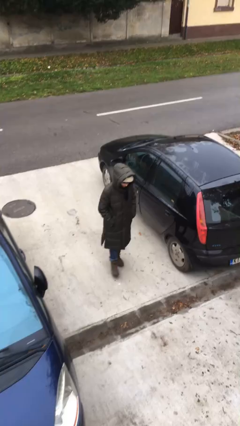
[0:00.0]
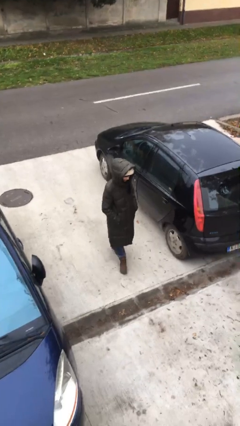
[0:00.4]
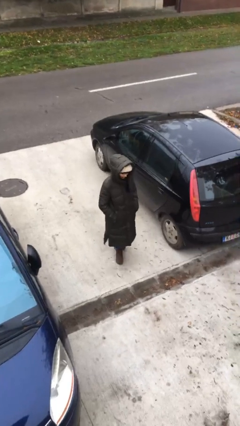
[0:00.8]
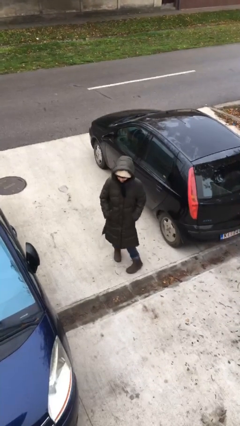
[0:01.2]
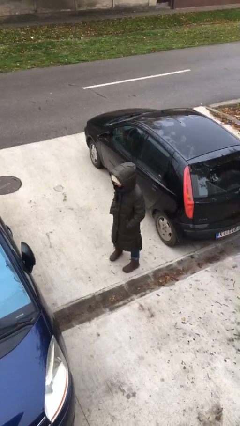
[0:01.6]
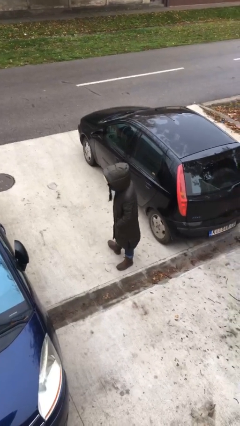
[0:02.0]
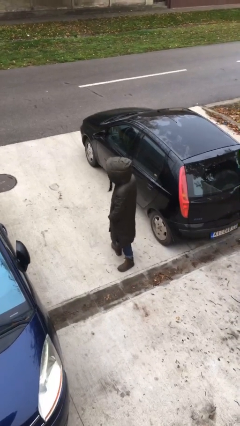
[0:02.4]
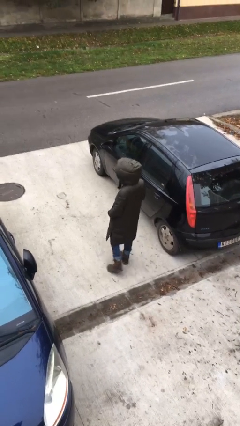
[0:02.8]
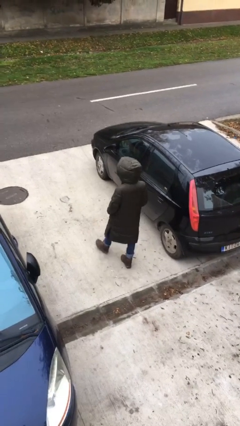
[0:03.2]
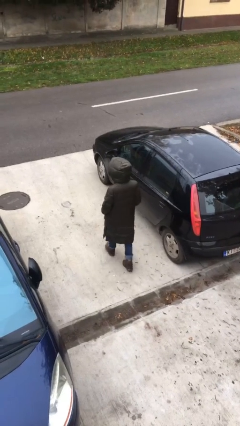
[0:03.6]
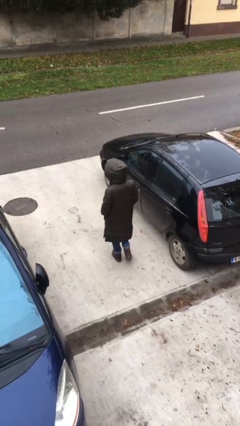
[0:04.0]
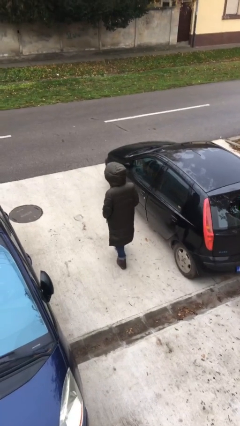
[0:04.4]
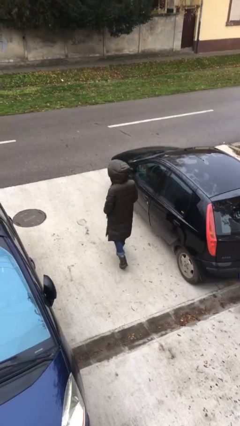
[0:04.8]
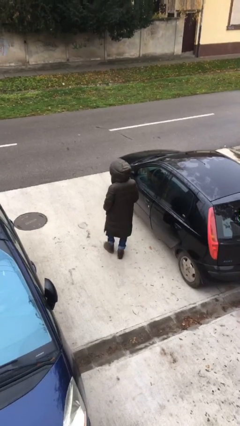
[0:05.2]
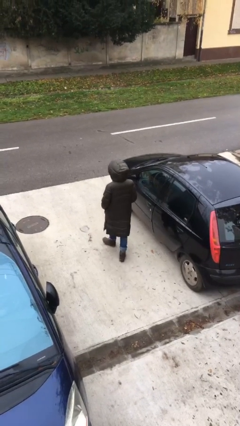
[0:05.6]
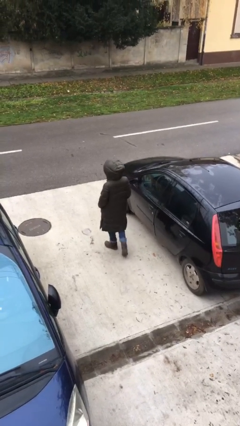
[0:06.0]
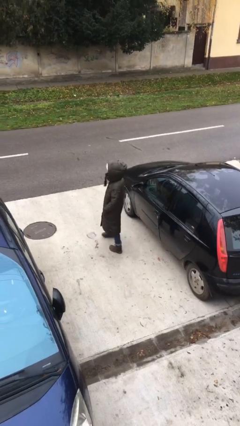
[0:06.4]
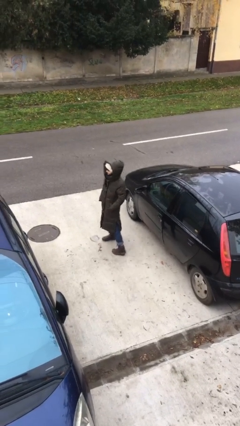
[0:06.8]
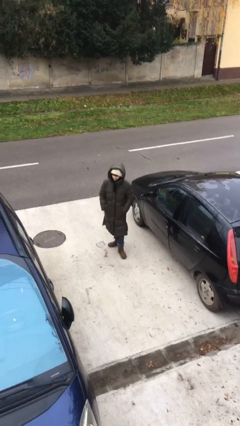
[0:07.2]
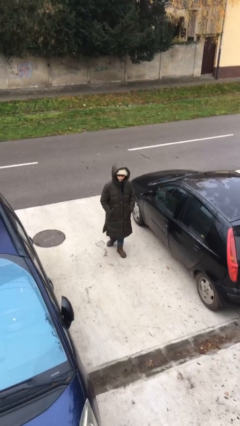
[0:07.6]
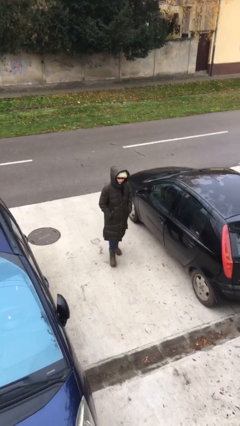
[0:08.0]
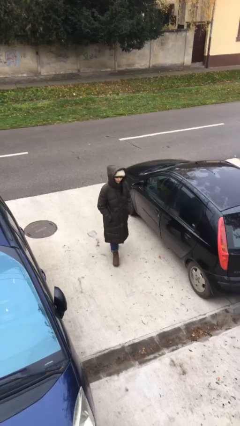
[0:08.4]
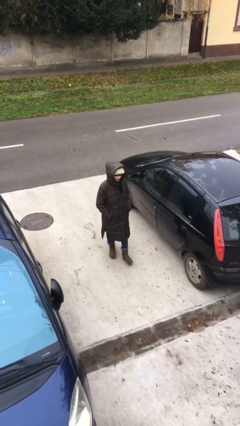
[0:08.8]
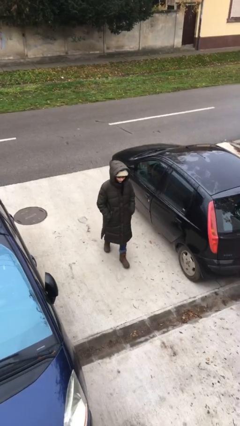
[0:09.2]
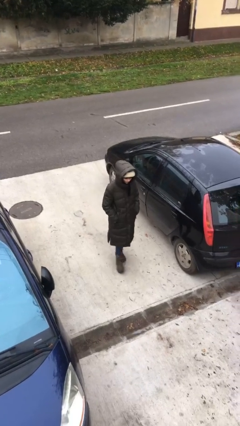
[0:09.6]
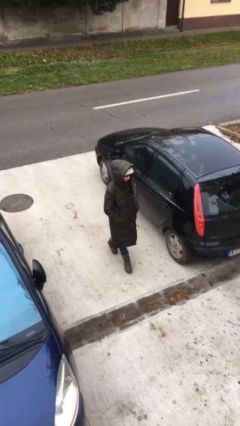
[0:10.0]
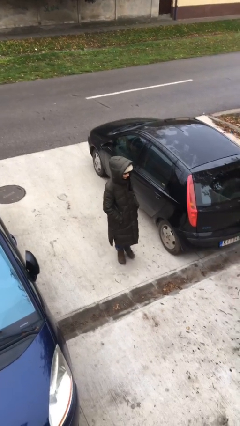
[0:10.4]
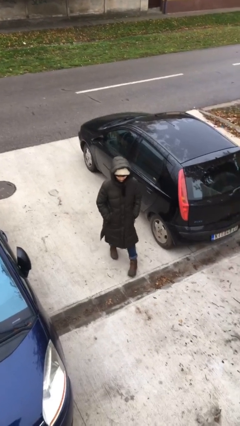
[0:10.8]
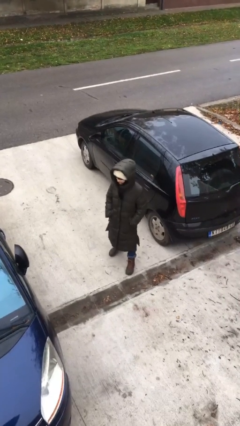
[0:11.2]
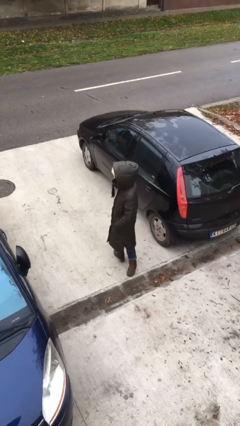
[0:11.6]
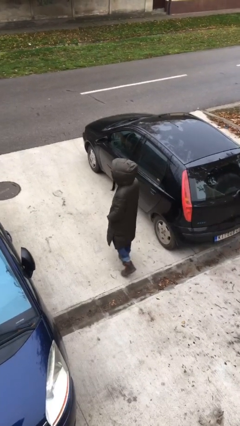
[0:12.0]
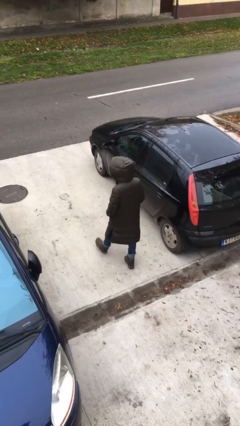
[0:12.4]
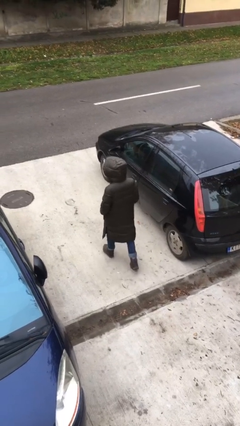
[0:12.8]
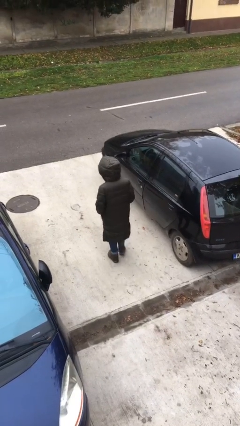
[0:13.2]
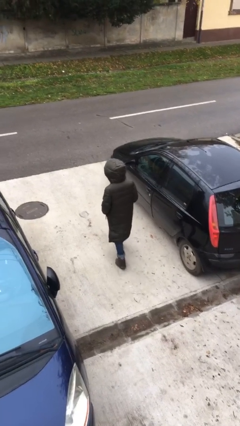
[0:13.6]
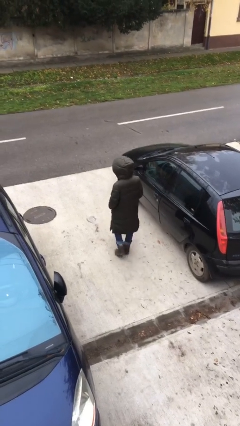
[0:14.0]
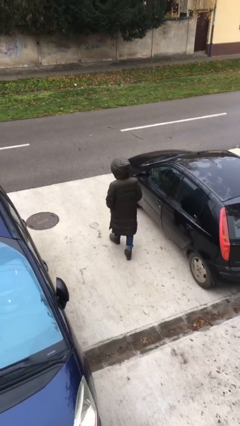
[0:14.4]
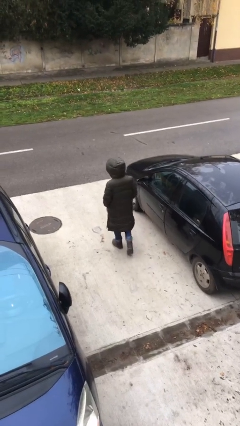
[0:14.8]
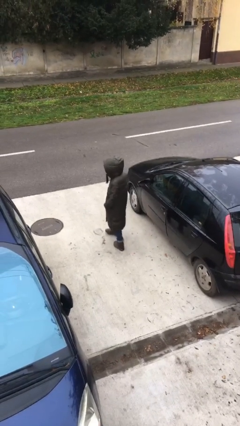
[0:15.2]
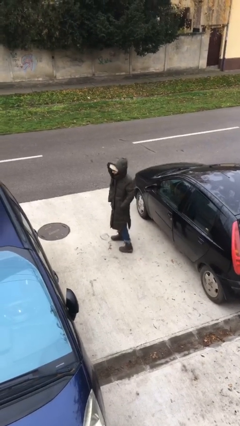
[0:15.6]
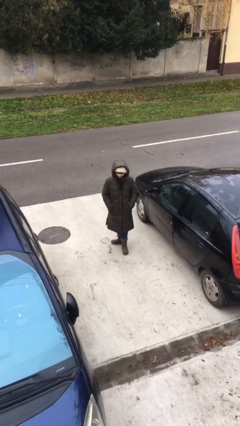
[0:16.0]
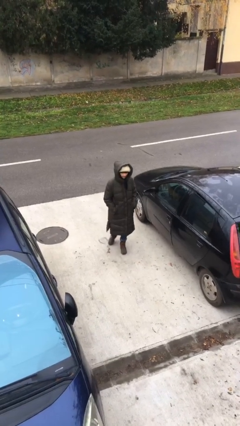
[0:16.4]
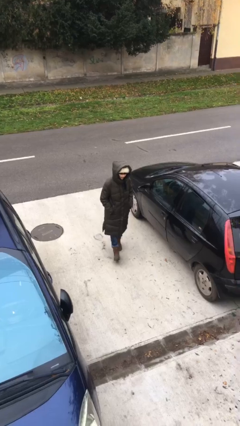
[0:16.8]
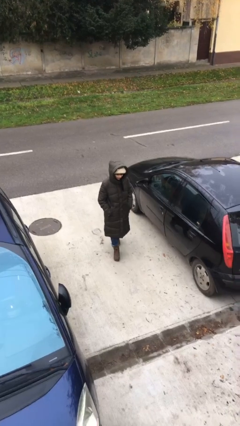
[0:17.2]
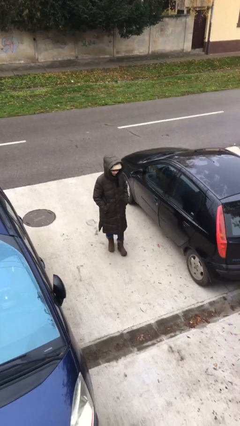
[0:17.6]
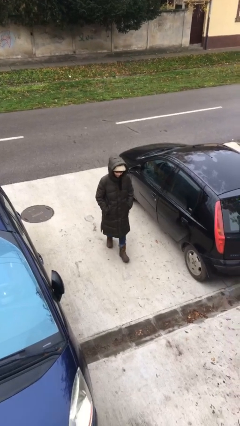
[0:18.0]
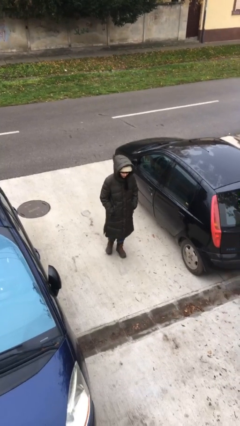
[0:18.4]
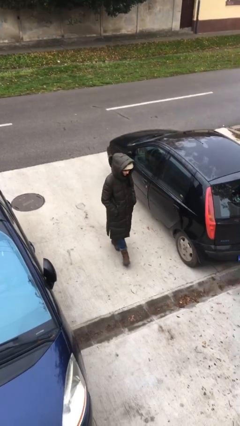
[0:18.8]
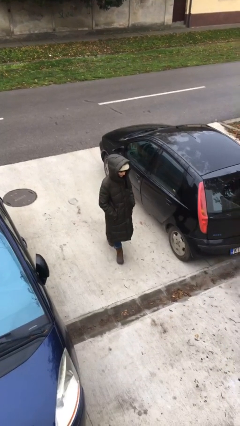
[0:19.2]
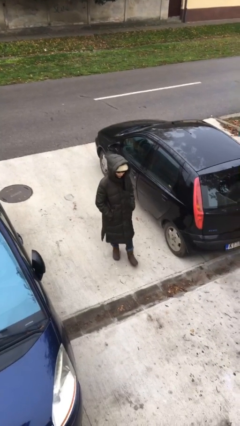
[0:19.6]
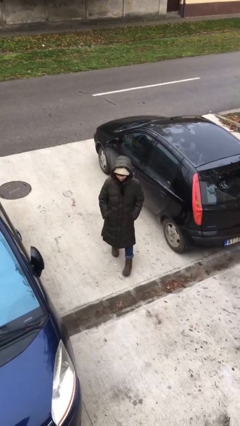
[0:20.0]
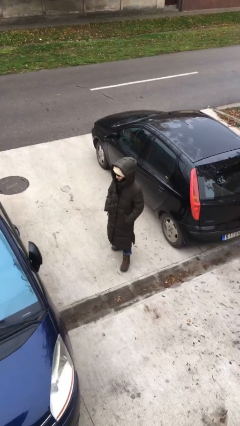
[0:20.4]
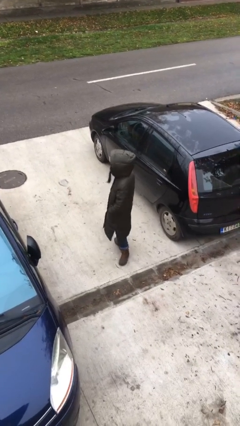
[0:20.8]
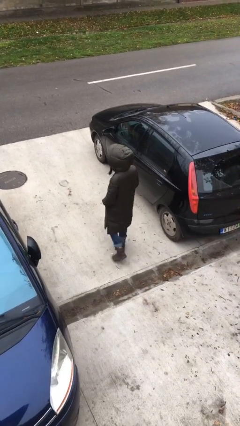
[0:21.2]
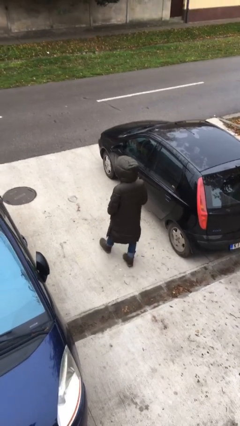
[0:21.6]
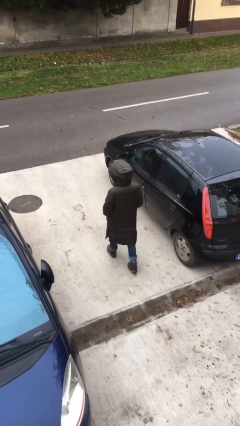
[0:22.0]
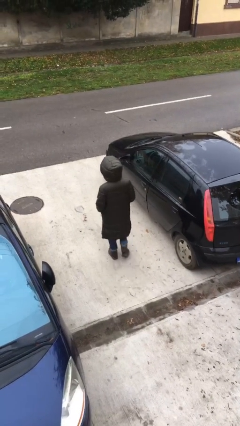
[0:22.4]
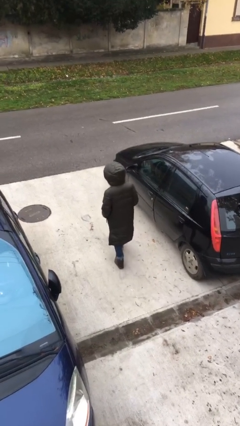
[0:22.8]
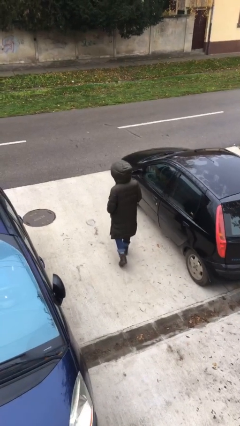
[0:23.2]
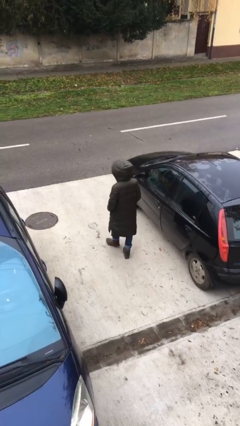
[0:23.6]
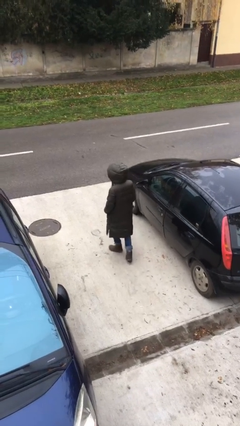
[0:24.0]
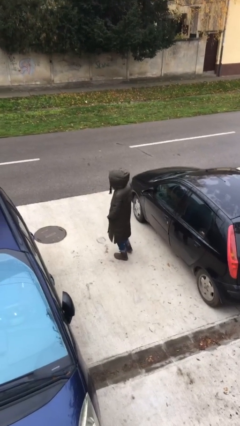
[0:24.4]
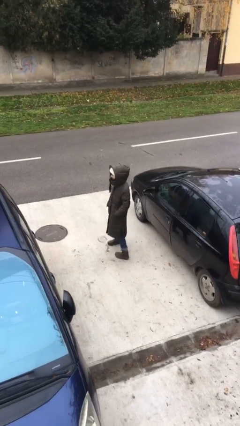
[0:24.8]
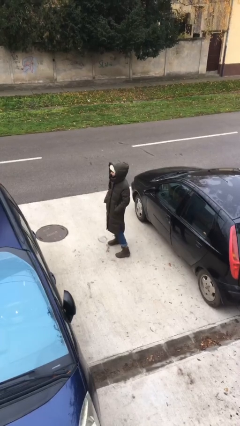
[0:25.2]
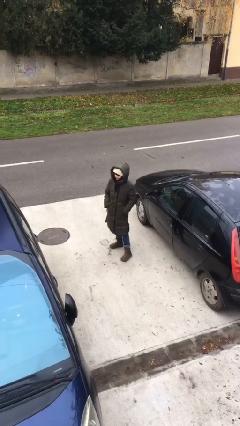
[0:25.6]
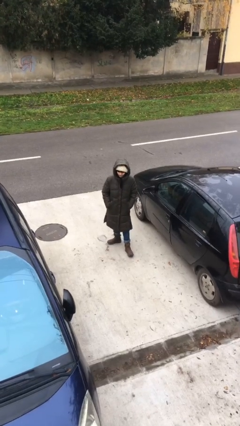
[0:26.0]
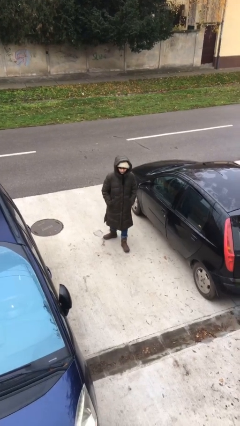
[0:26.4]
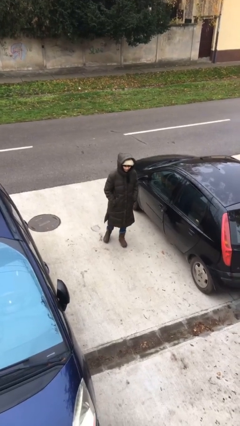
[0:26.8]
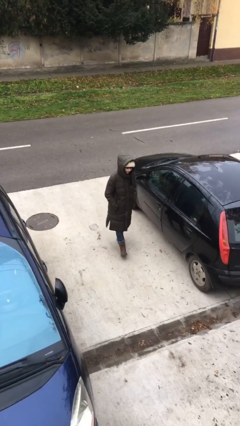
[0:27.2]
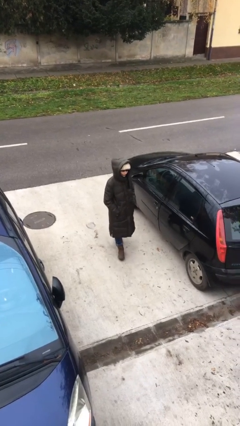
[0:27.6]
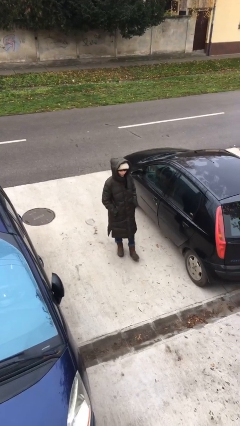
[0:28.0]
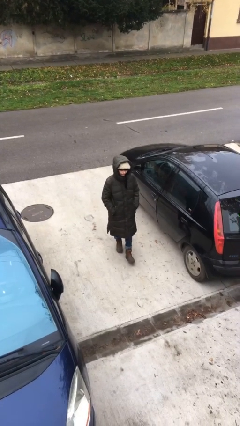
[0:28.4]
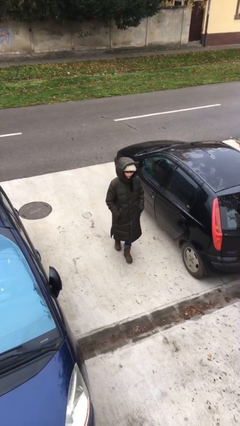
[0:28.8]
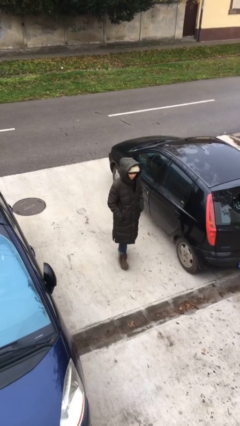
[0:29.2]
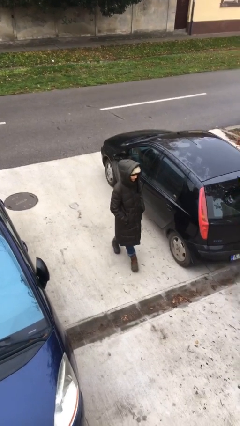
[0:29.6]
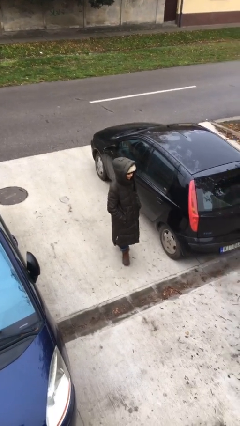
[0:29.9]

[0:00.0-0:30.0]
person walks

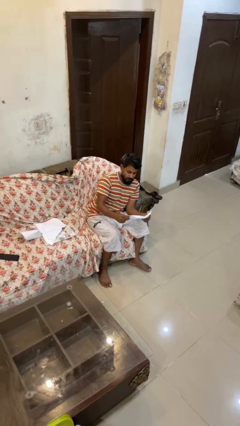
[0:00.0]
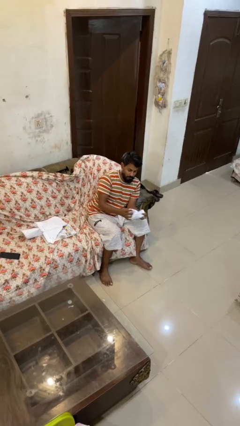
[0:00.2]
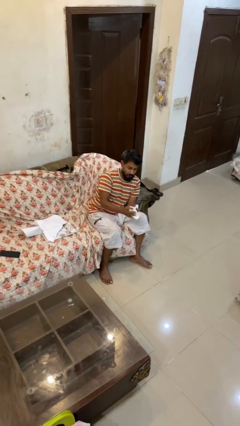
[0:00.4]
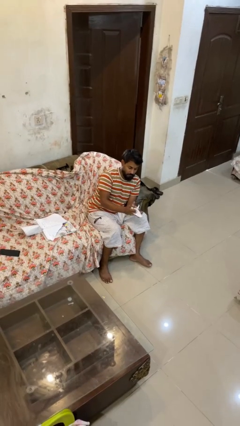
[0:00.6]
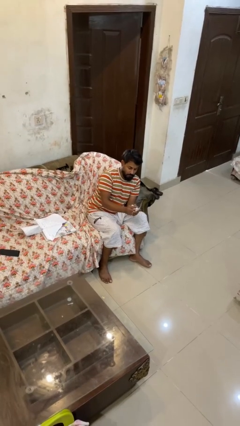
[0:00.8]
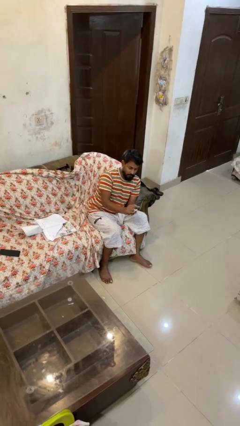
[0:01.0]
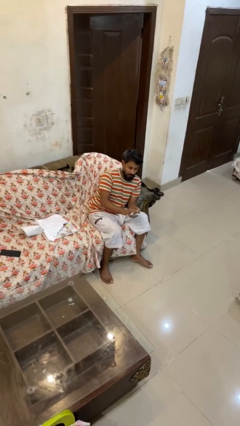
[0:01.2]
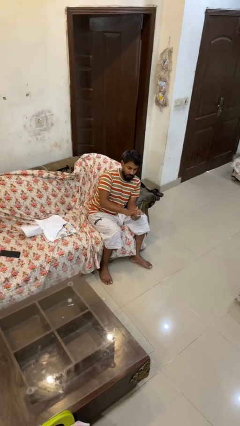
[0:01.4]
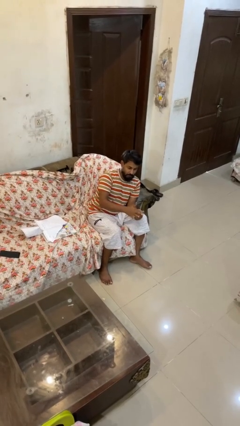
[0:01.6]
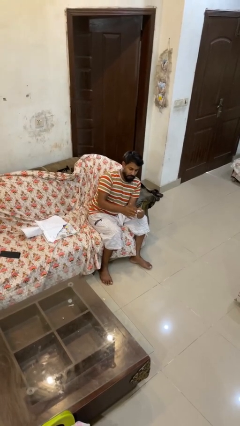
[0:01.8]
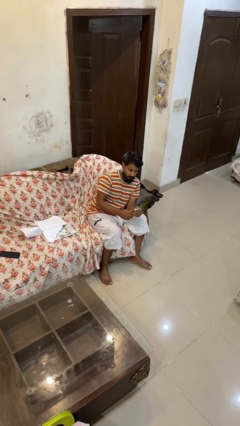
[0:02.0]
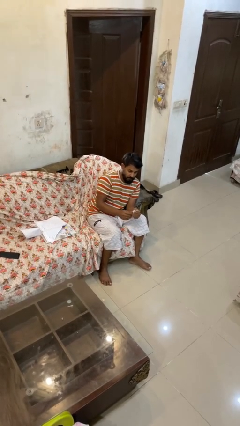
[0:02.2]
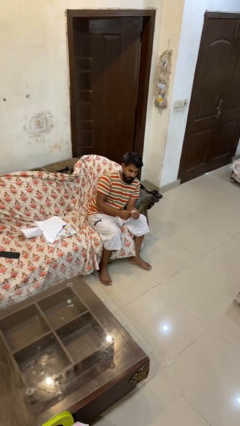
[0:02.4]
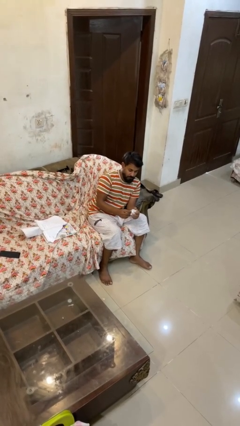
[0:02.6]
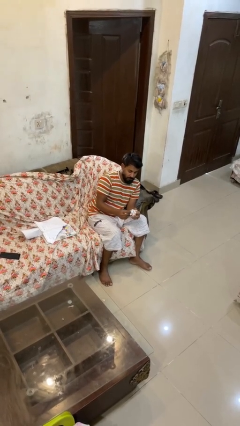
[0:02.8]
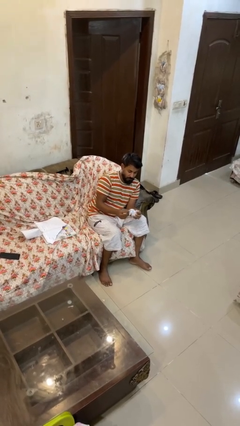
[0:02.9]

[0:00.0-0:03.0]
person crumples paper
